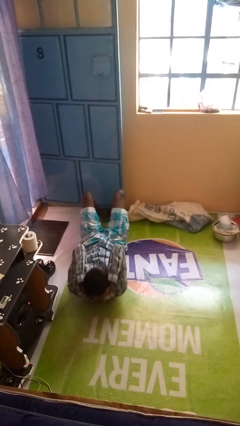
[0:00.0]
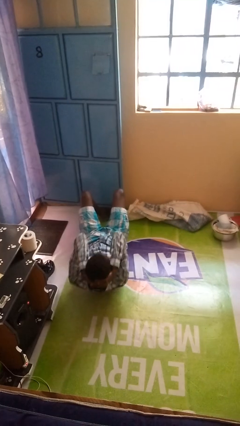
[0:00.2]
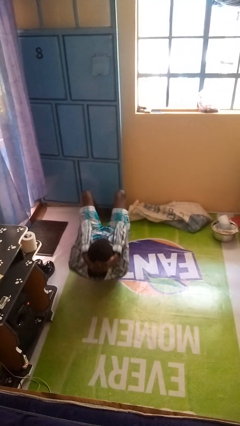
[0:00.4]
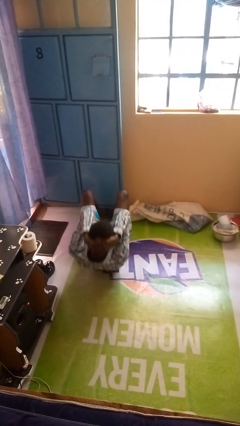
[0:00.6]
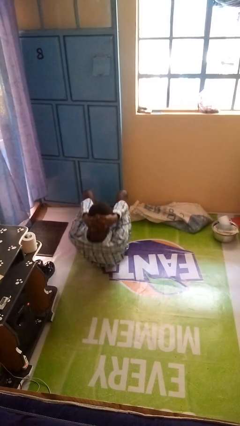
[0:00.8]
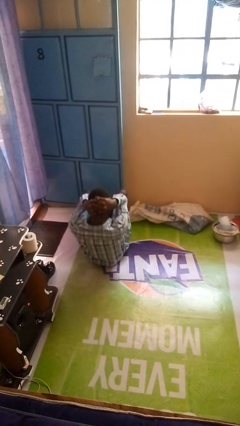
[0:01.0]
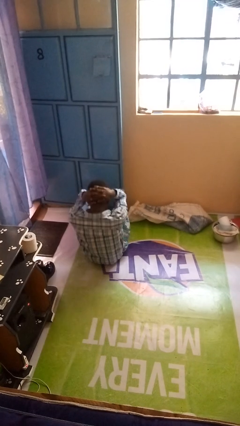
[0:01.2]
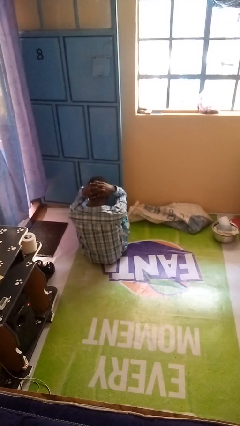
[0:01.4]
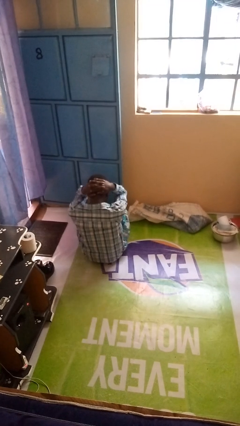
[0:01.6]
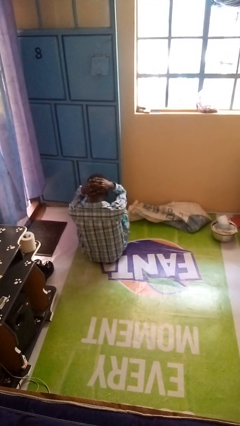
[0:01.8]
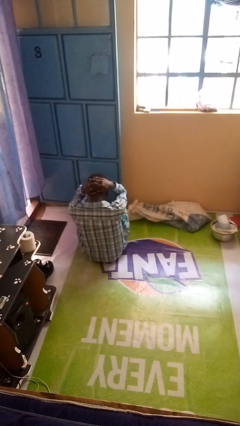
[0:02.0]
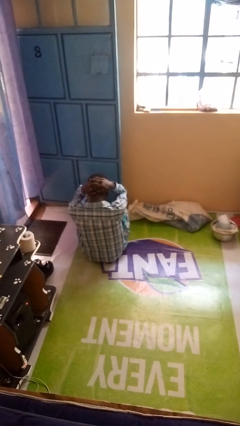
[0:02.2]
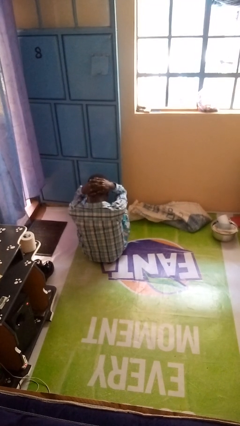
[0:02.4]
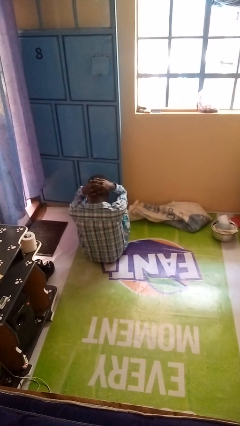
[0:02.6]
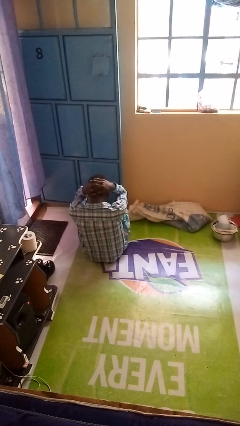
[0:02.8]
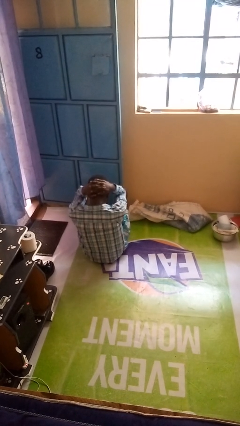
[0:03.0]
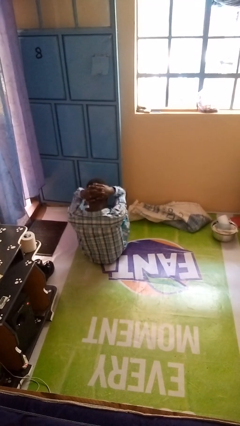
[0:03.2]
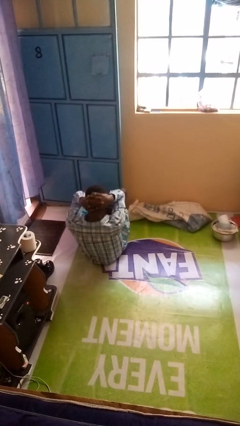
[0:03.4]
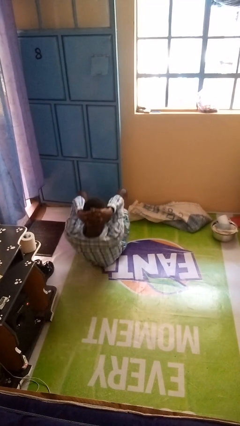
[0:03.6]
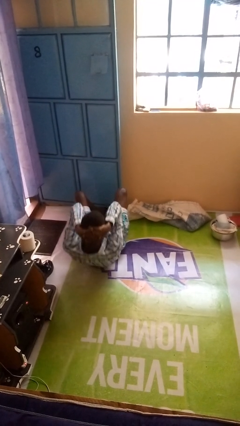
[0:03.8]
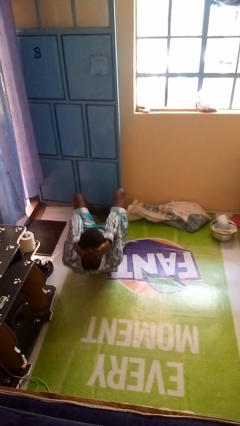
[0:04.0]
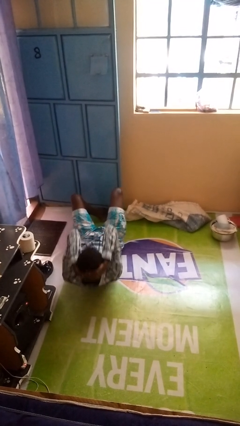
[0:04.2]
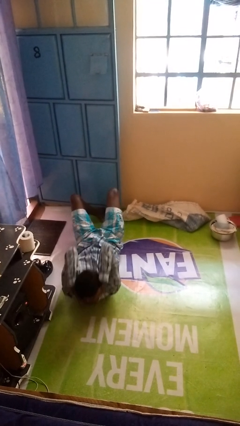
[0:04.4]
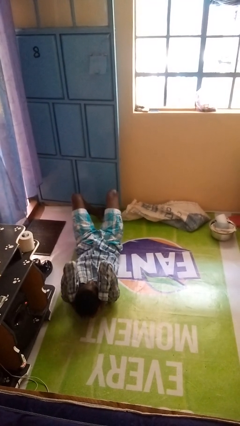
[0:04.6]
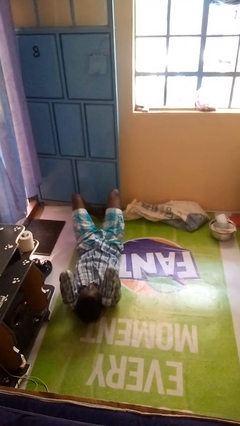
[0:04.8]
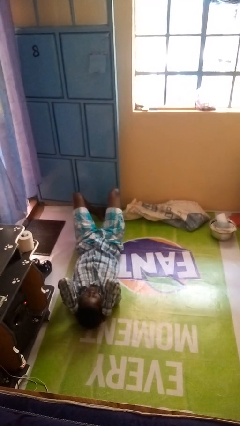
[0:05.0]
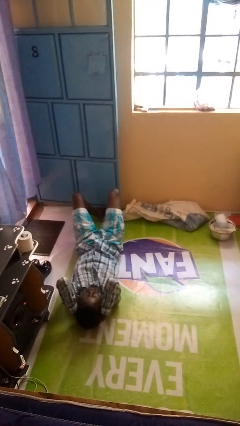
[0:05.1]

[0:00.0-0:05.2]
person exercises with situp

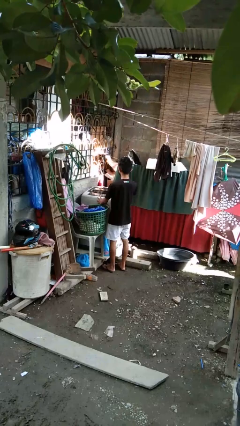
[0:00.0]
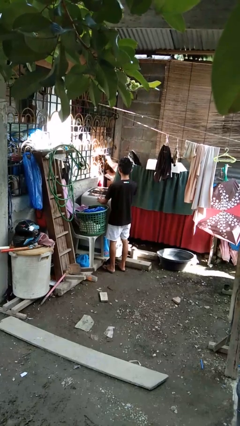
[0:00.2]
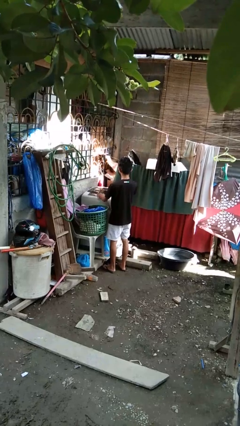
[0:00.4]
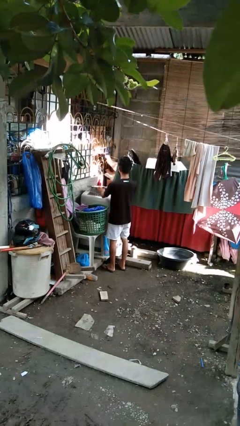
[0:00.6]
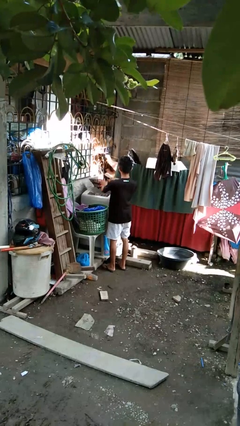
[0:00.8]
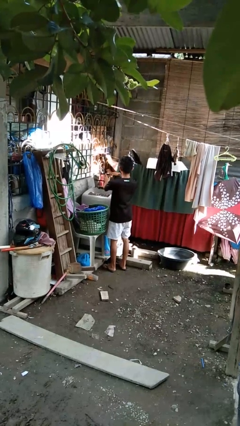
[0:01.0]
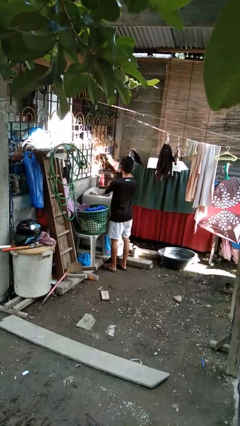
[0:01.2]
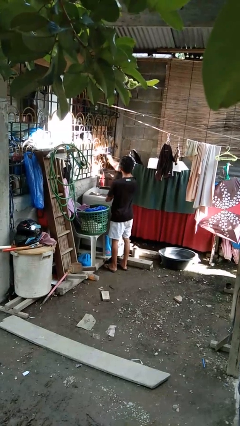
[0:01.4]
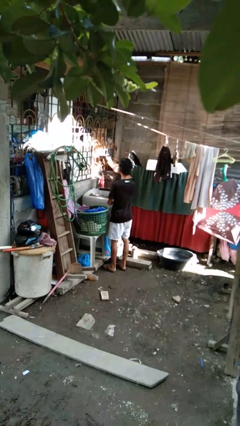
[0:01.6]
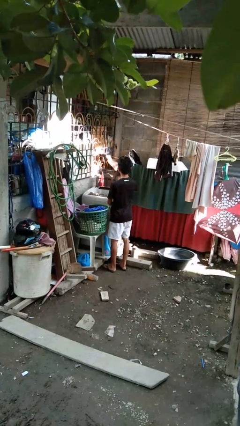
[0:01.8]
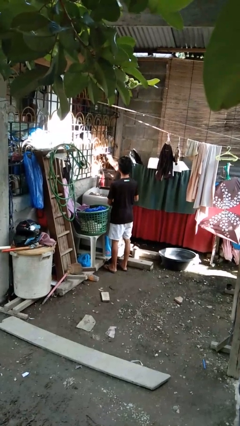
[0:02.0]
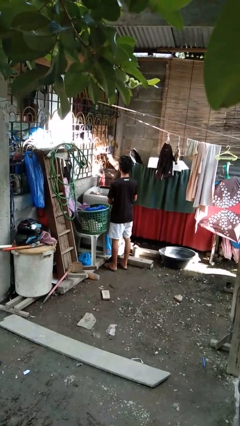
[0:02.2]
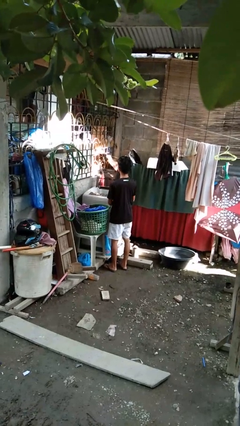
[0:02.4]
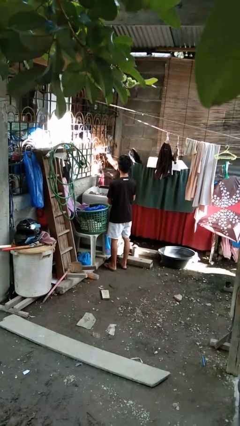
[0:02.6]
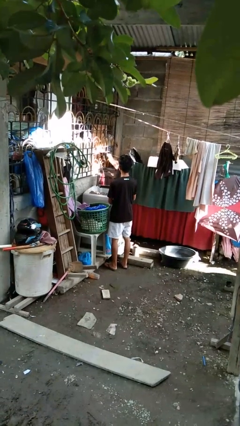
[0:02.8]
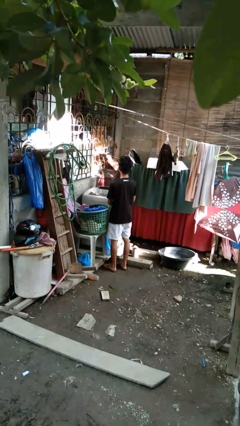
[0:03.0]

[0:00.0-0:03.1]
person opens clothes washer

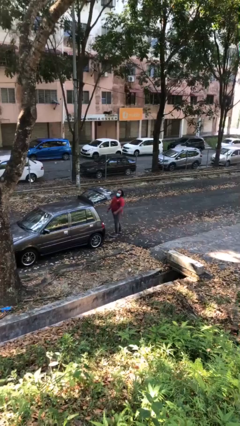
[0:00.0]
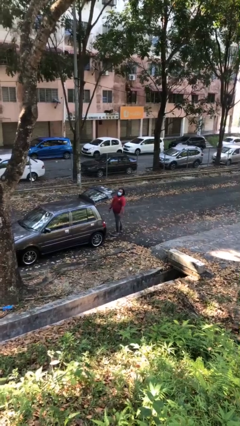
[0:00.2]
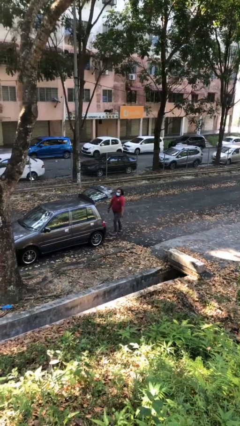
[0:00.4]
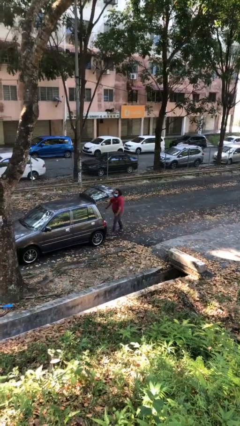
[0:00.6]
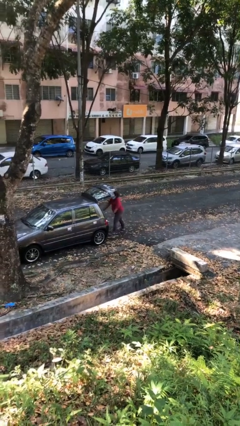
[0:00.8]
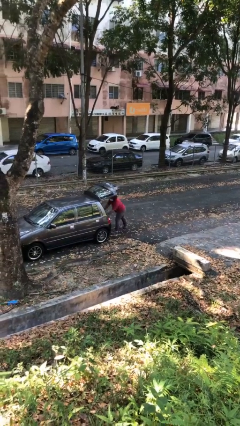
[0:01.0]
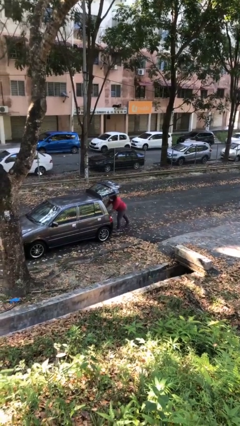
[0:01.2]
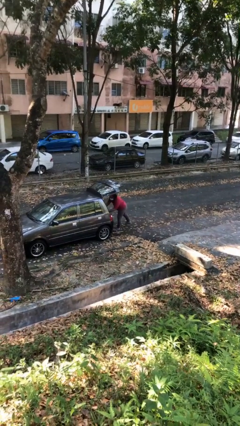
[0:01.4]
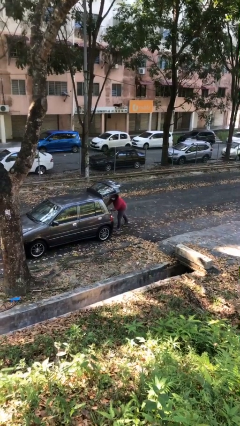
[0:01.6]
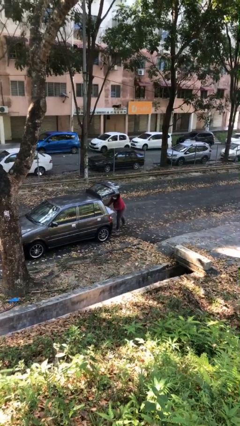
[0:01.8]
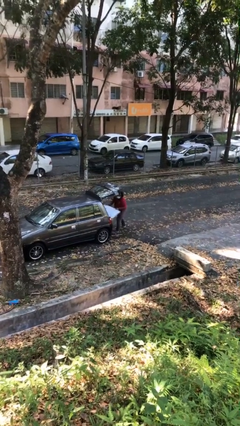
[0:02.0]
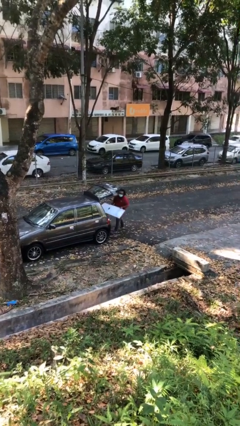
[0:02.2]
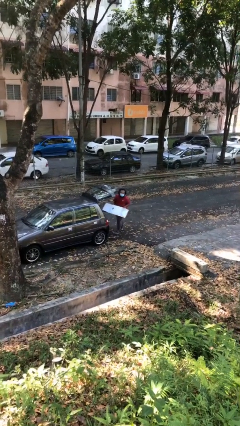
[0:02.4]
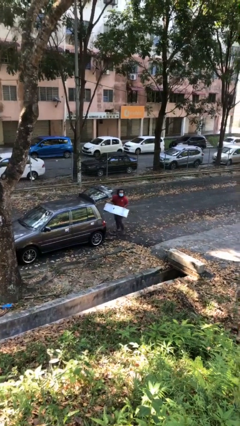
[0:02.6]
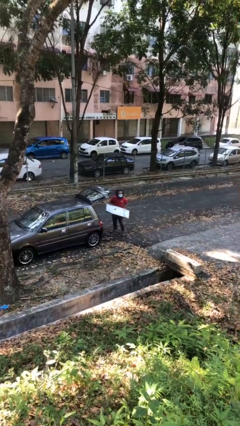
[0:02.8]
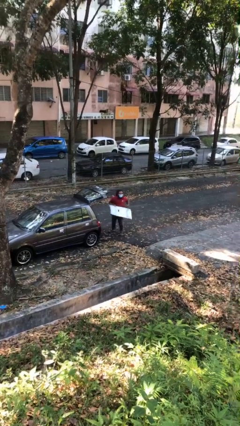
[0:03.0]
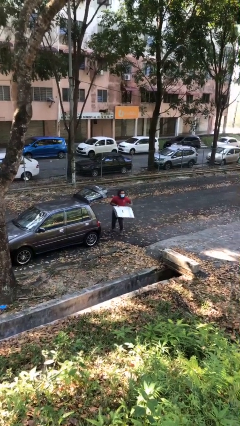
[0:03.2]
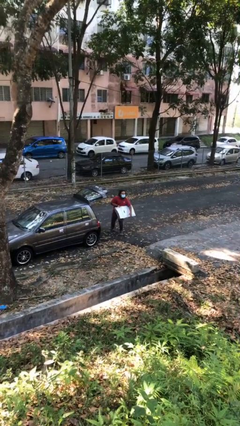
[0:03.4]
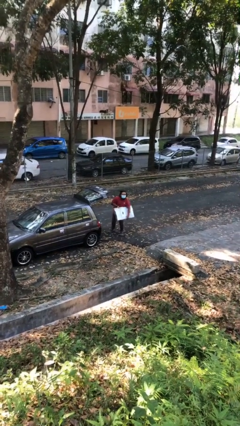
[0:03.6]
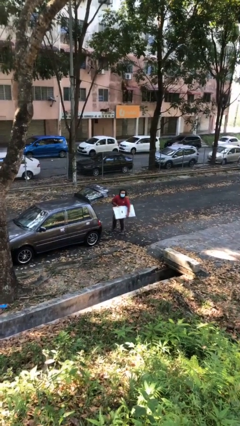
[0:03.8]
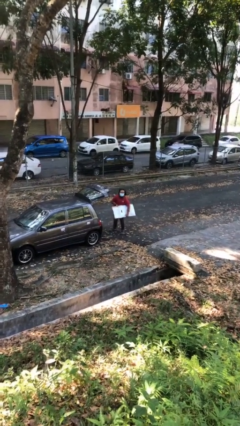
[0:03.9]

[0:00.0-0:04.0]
person unloads car

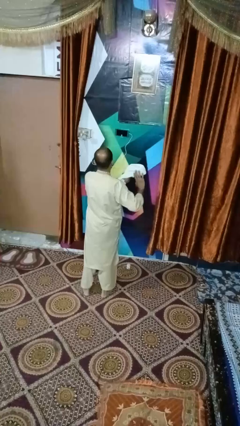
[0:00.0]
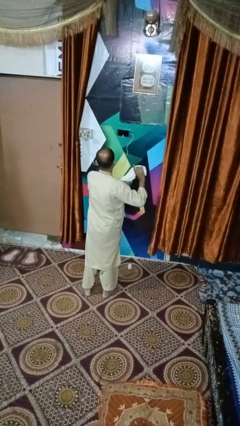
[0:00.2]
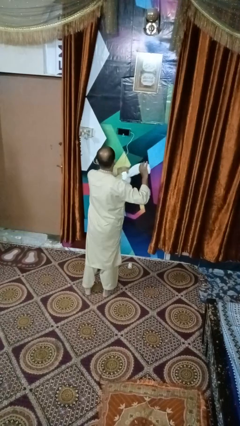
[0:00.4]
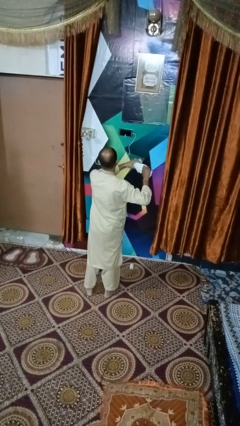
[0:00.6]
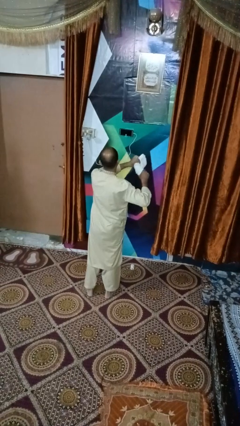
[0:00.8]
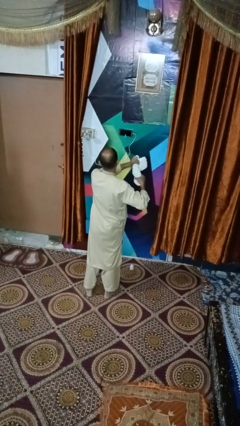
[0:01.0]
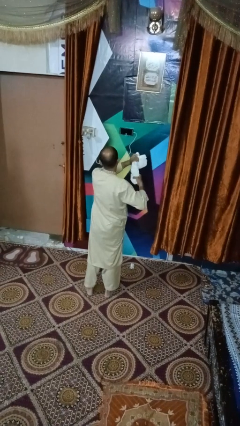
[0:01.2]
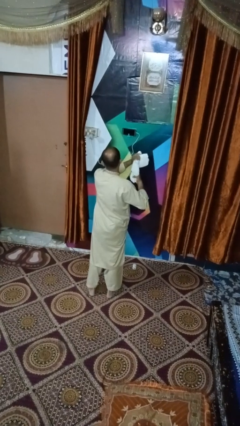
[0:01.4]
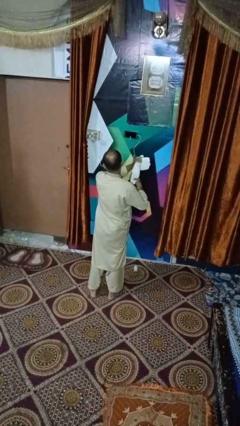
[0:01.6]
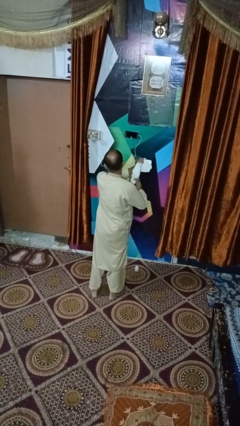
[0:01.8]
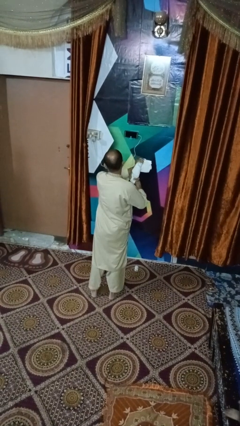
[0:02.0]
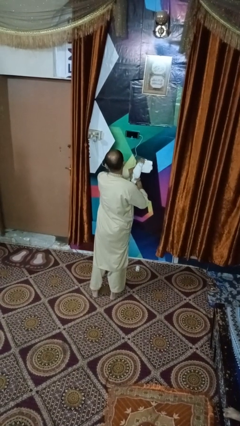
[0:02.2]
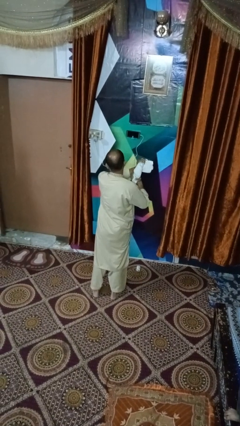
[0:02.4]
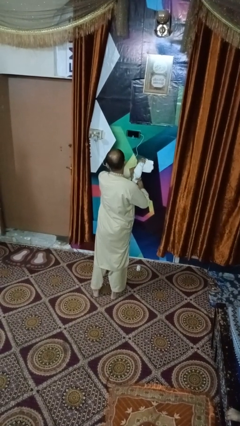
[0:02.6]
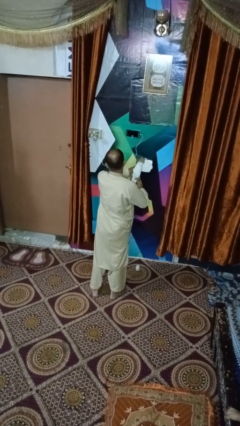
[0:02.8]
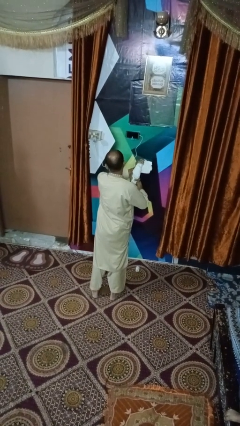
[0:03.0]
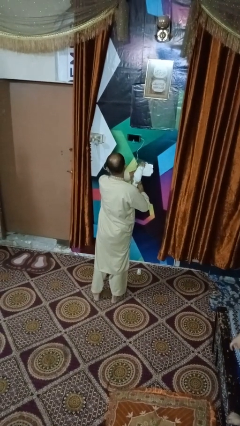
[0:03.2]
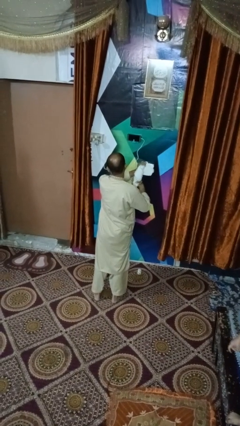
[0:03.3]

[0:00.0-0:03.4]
person squeezes object

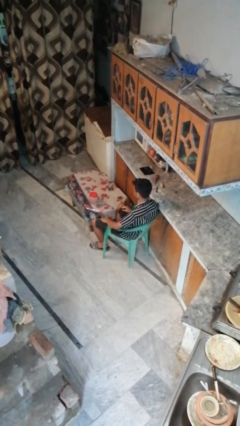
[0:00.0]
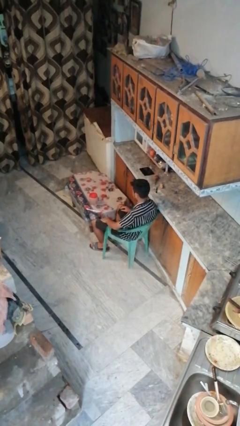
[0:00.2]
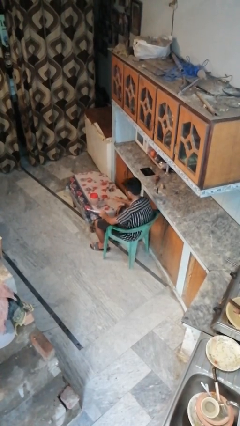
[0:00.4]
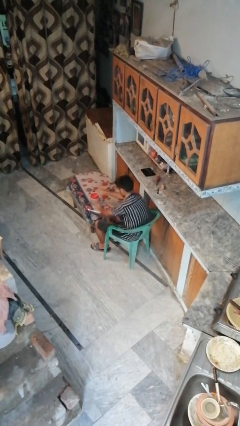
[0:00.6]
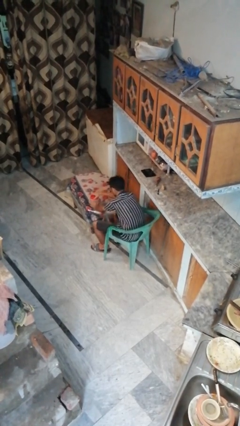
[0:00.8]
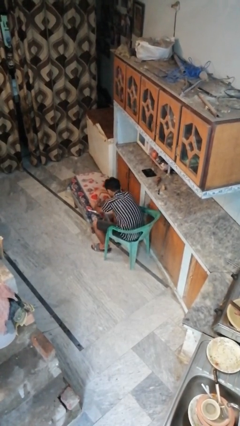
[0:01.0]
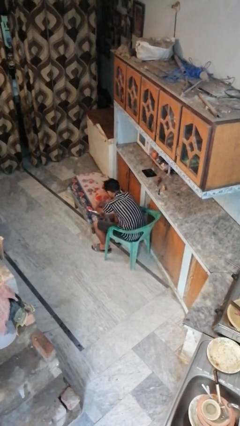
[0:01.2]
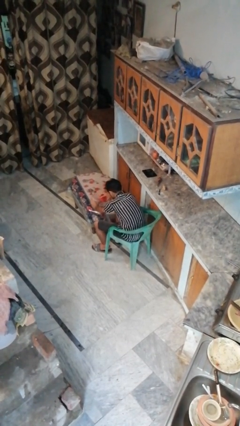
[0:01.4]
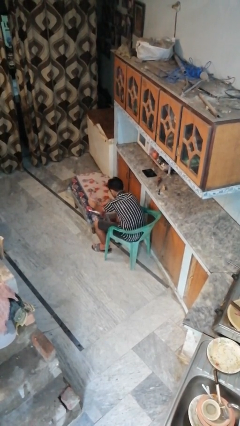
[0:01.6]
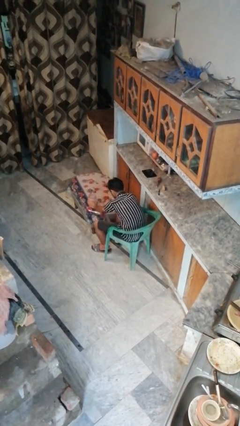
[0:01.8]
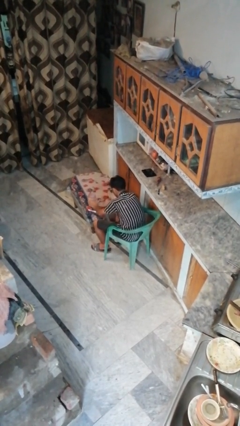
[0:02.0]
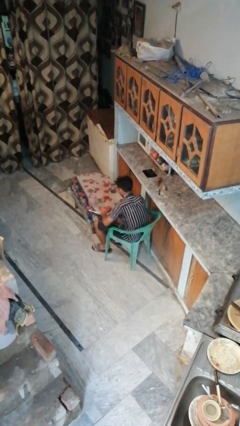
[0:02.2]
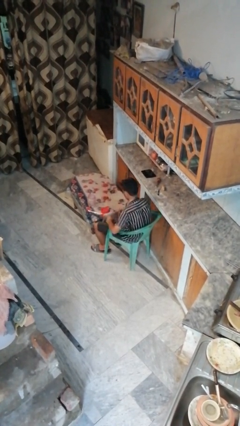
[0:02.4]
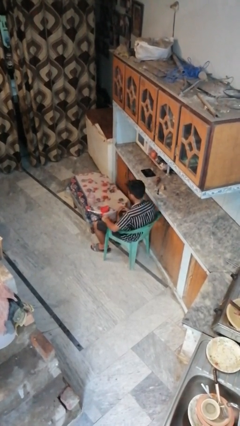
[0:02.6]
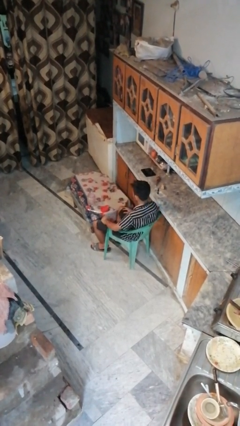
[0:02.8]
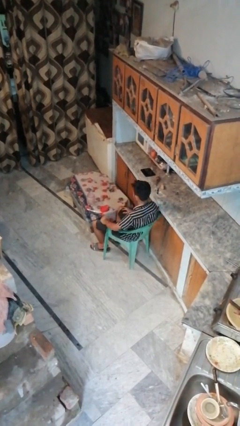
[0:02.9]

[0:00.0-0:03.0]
person opens jar
